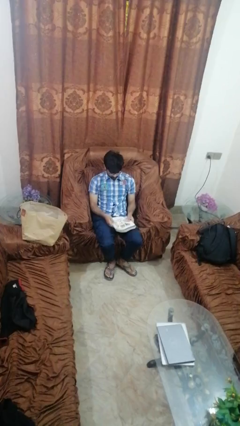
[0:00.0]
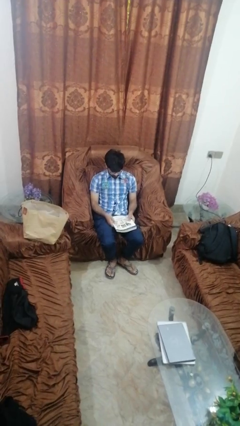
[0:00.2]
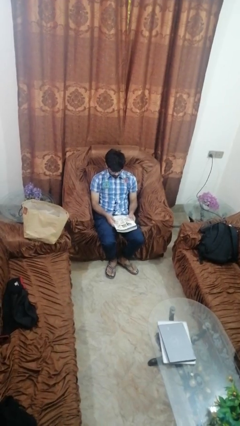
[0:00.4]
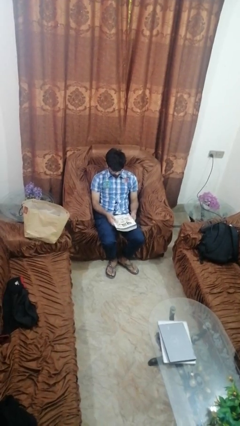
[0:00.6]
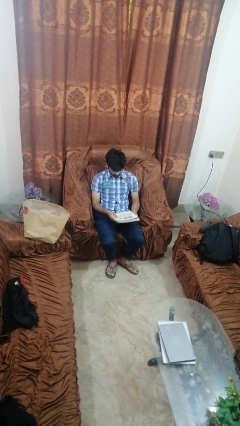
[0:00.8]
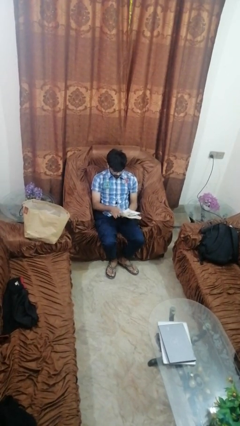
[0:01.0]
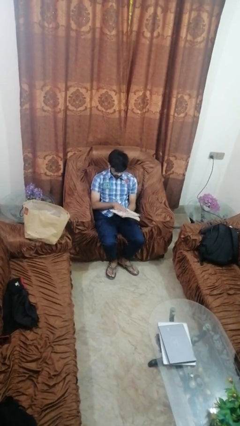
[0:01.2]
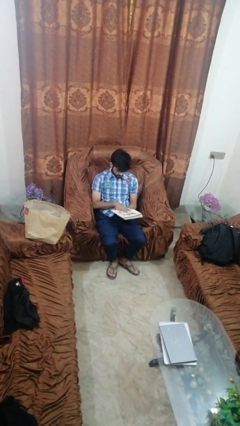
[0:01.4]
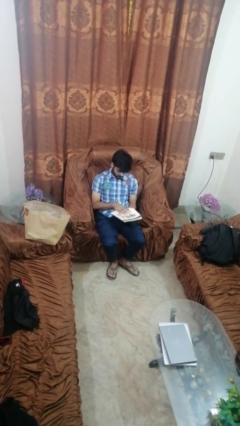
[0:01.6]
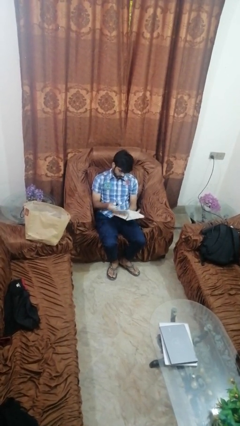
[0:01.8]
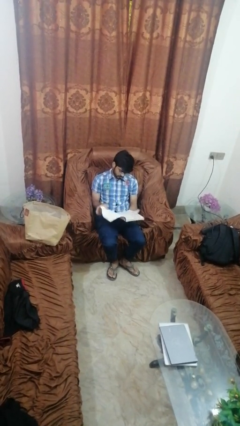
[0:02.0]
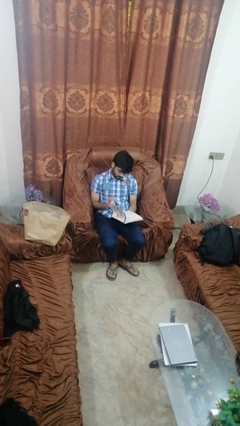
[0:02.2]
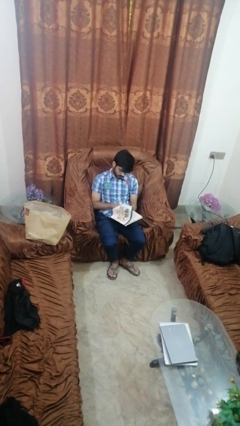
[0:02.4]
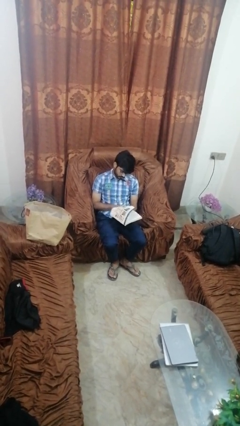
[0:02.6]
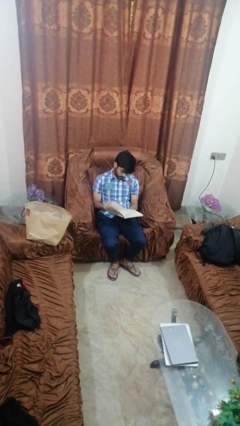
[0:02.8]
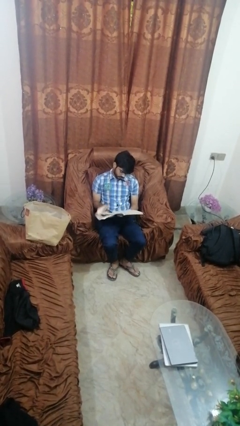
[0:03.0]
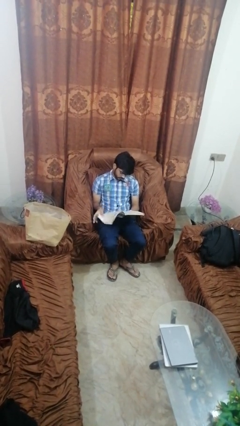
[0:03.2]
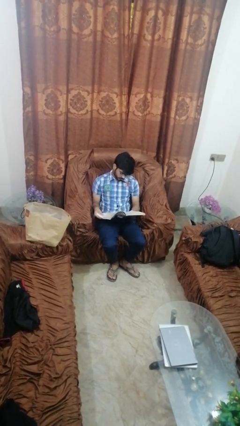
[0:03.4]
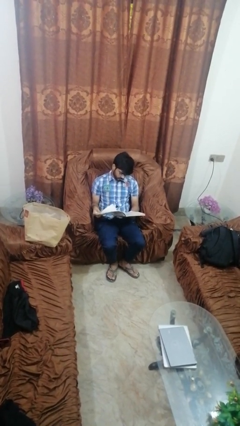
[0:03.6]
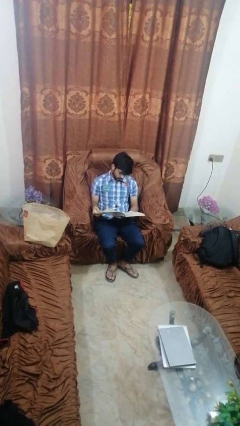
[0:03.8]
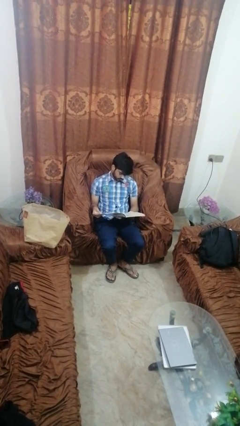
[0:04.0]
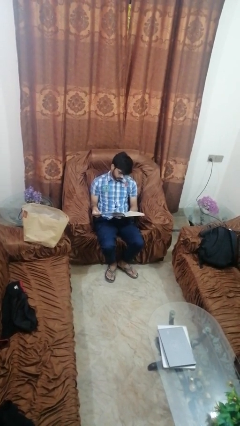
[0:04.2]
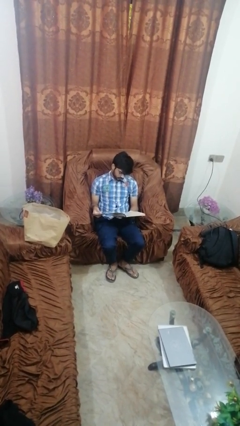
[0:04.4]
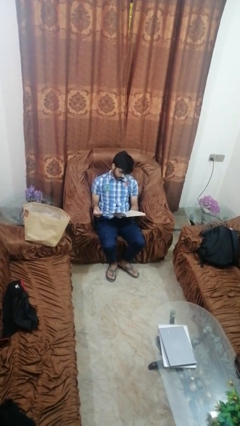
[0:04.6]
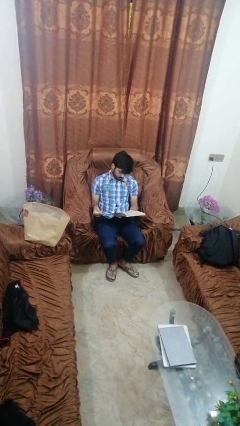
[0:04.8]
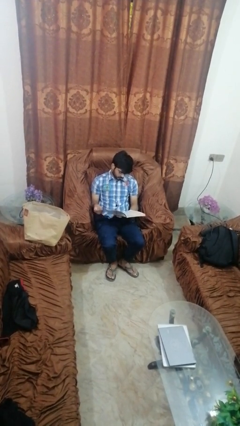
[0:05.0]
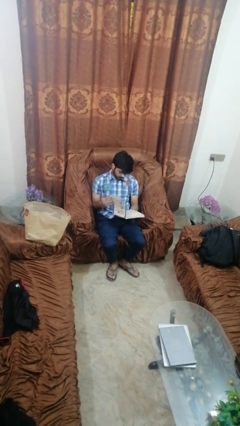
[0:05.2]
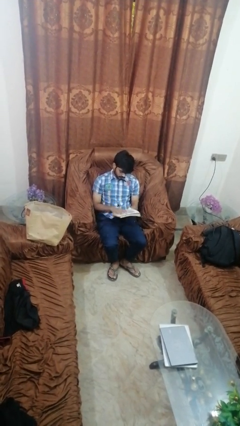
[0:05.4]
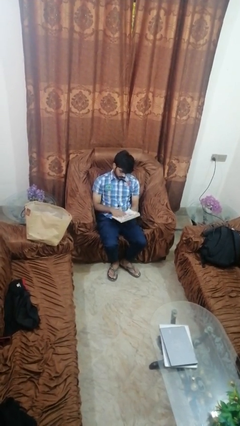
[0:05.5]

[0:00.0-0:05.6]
person reads magazine

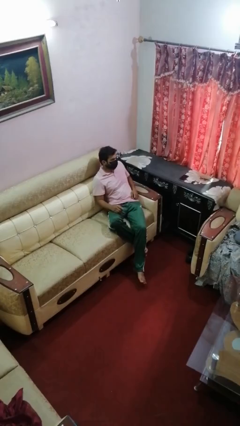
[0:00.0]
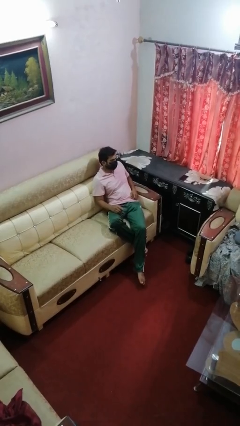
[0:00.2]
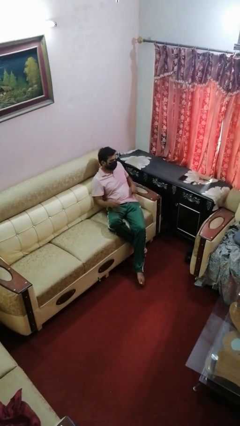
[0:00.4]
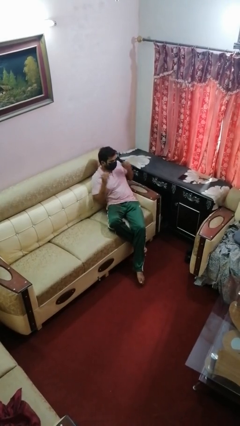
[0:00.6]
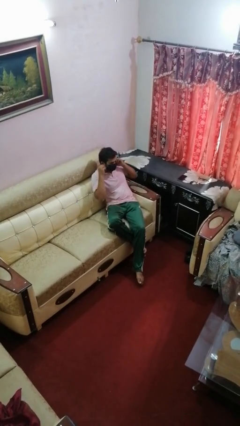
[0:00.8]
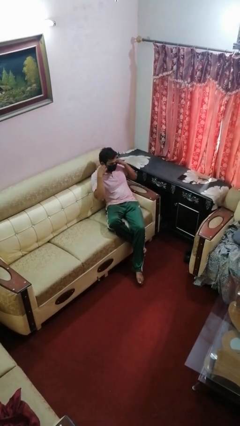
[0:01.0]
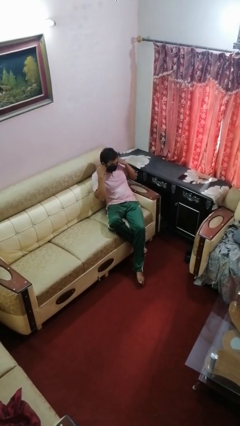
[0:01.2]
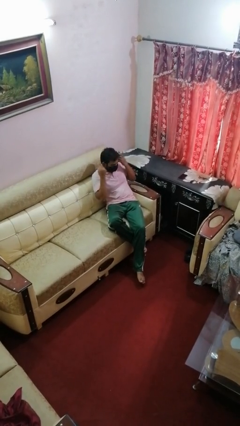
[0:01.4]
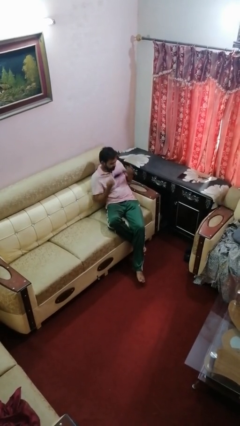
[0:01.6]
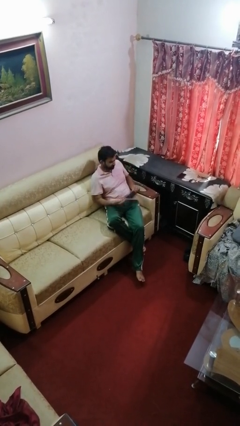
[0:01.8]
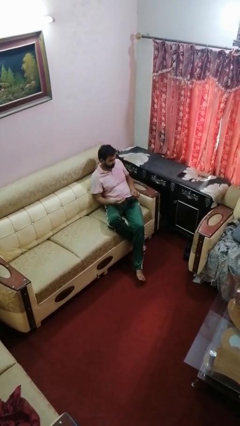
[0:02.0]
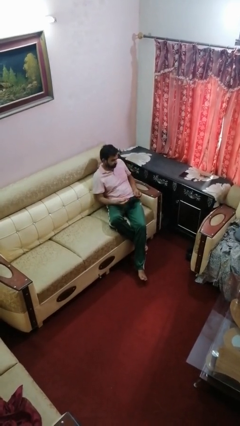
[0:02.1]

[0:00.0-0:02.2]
person takes off facemask

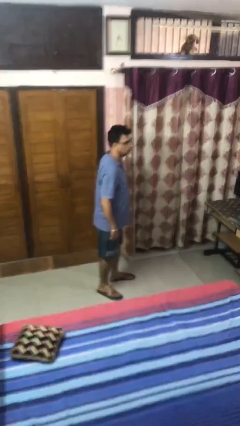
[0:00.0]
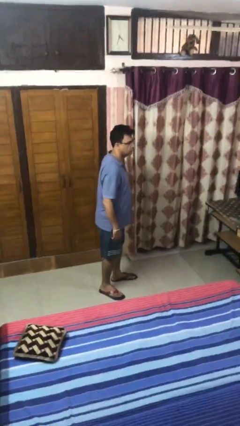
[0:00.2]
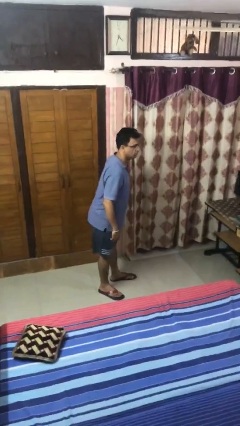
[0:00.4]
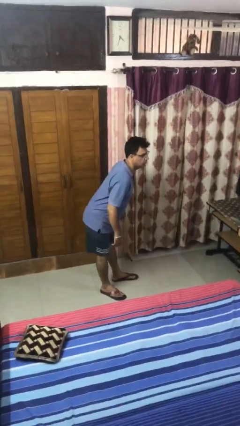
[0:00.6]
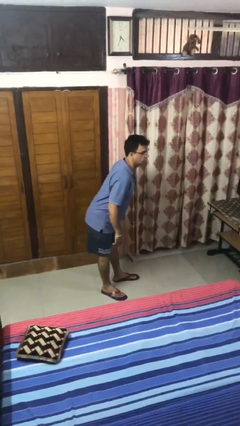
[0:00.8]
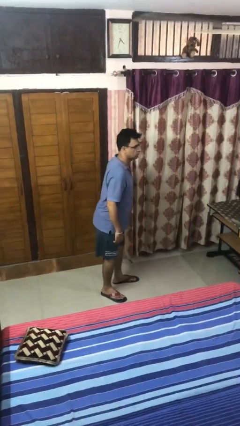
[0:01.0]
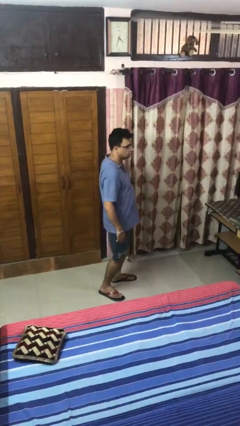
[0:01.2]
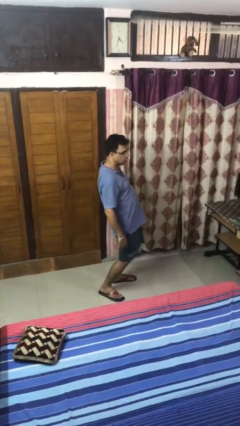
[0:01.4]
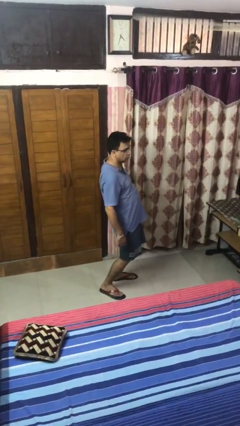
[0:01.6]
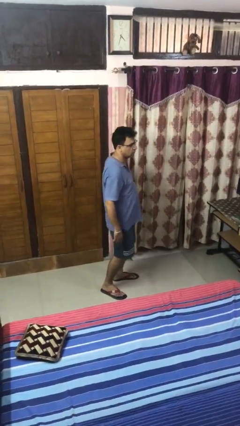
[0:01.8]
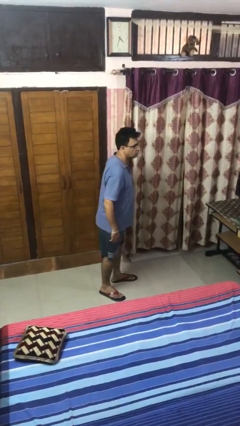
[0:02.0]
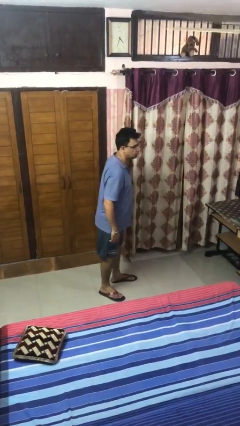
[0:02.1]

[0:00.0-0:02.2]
person wiggles hips

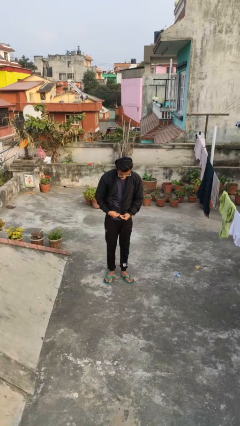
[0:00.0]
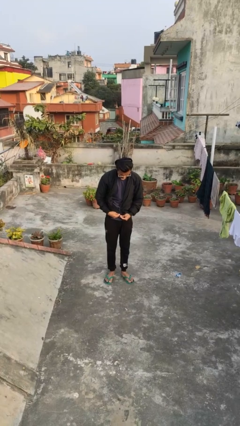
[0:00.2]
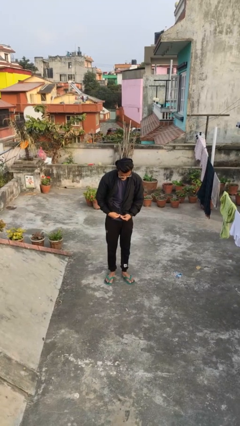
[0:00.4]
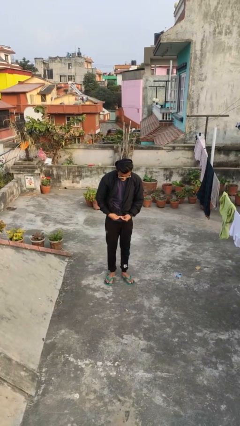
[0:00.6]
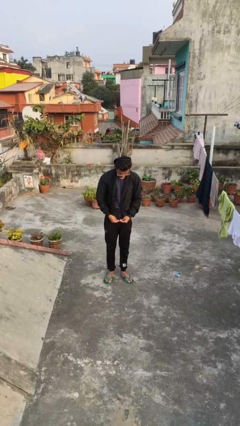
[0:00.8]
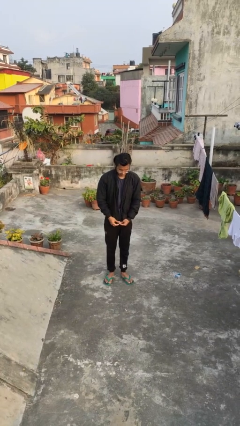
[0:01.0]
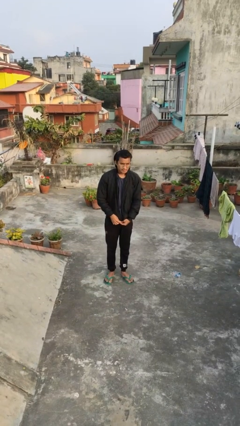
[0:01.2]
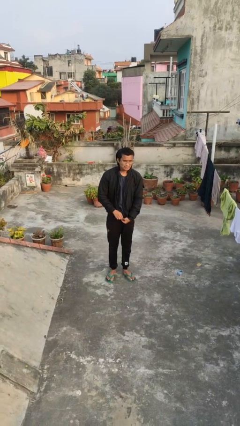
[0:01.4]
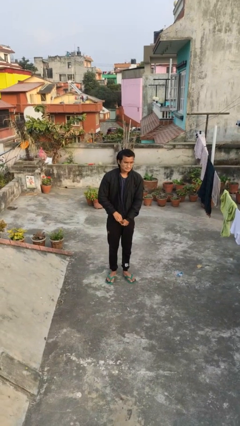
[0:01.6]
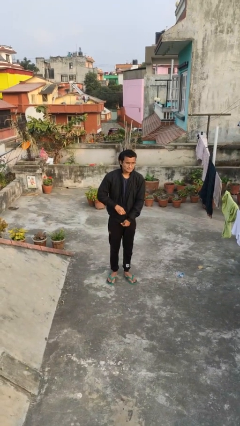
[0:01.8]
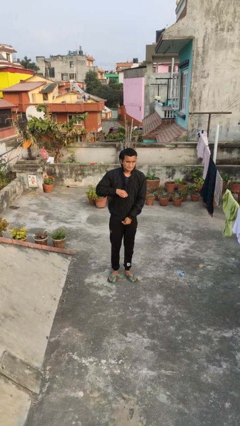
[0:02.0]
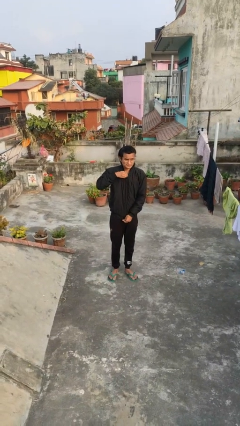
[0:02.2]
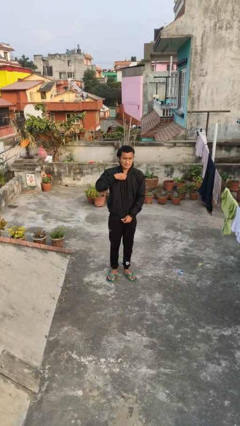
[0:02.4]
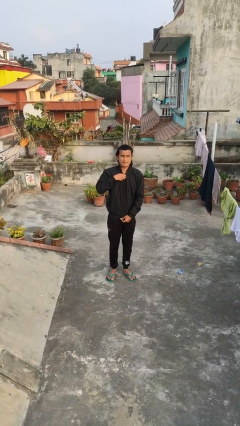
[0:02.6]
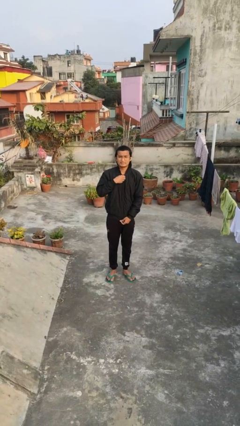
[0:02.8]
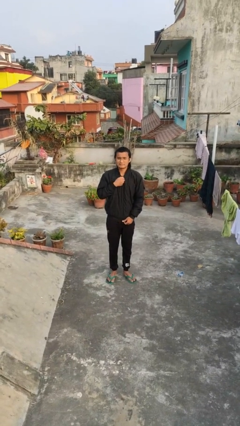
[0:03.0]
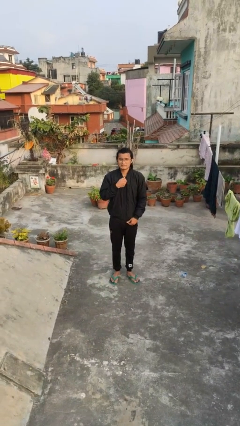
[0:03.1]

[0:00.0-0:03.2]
person zips up jacket

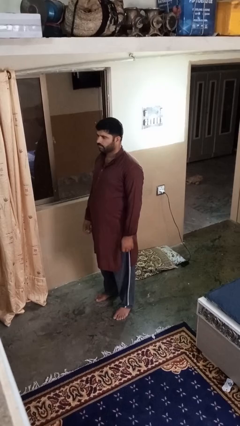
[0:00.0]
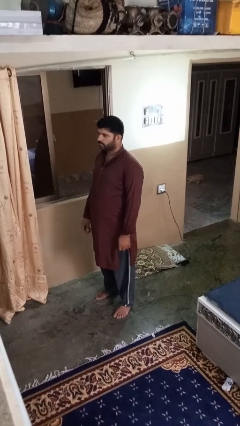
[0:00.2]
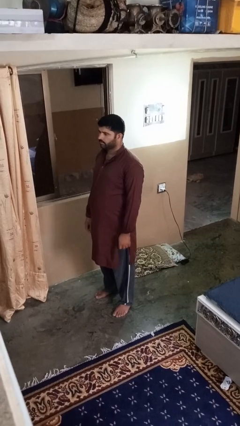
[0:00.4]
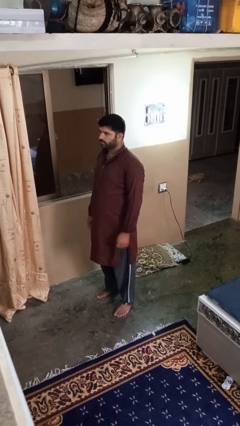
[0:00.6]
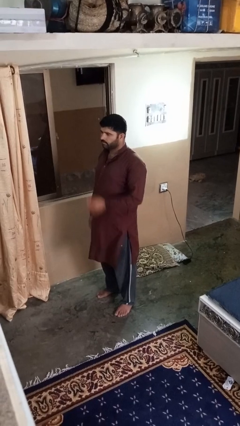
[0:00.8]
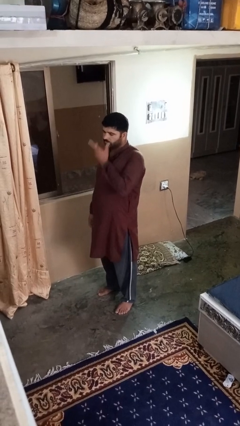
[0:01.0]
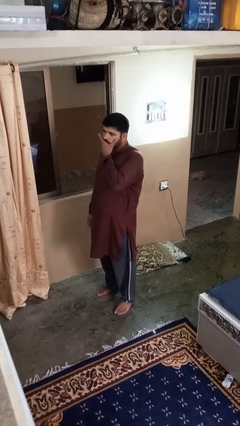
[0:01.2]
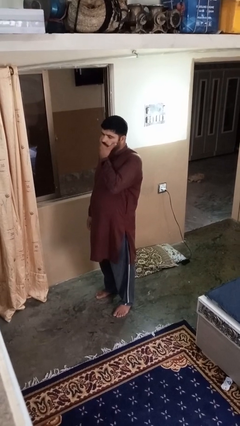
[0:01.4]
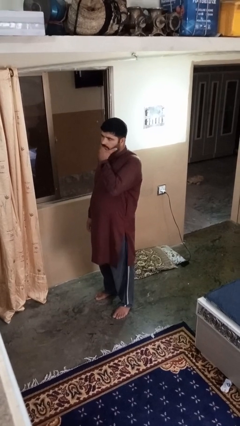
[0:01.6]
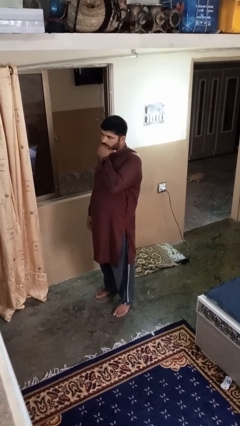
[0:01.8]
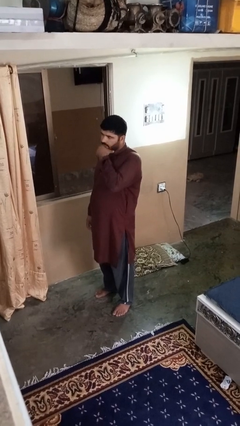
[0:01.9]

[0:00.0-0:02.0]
person strokes chin

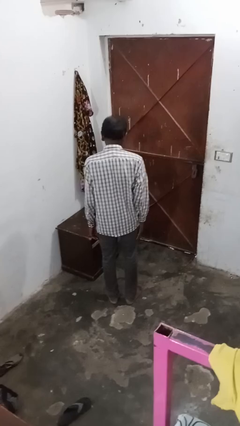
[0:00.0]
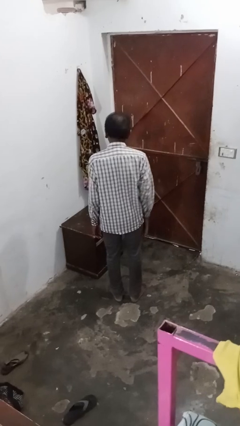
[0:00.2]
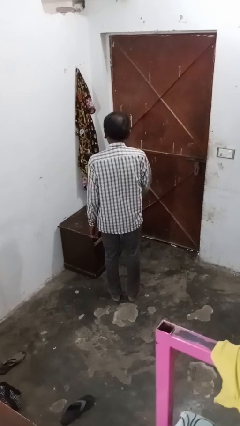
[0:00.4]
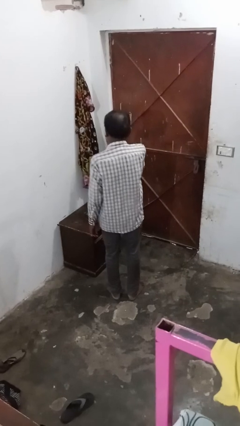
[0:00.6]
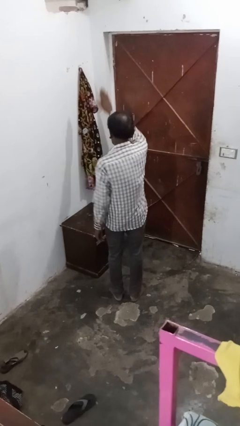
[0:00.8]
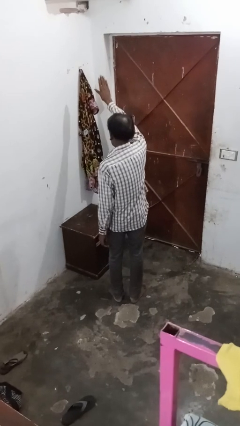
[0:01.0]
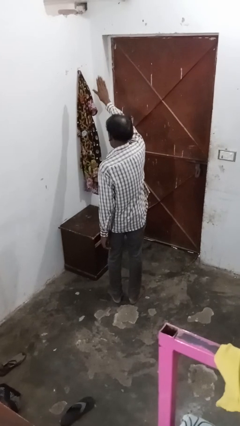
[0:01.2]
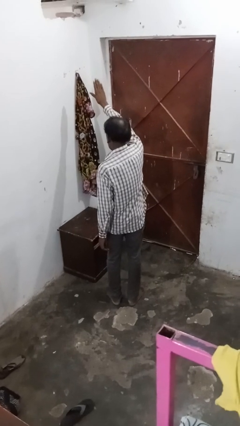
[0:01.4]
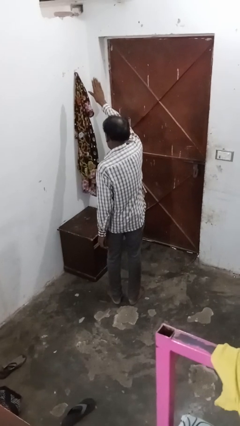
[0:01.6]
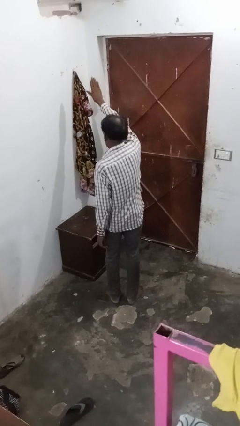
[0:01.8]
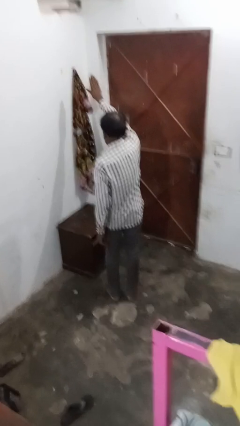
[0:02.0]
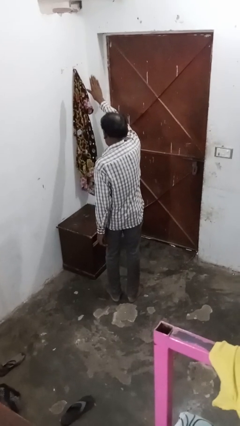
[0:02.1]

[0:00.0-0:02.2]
person gestures stop
